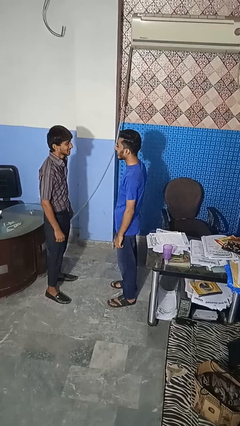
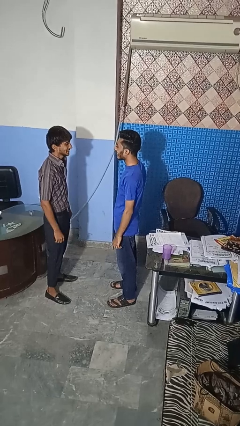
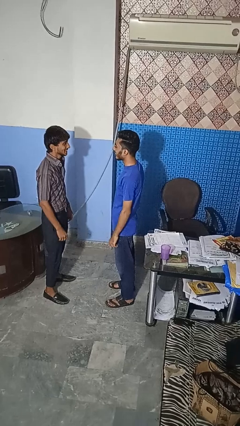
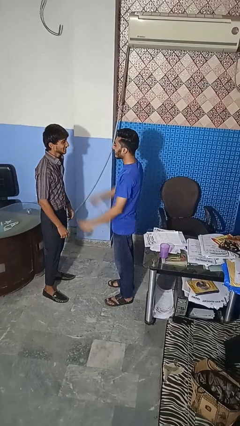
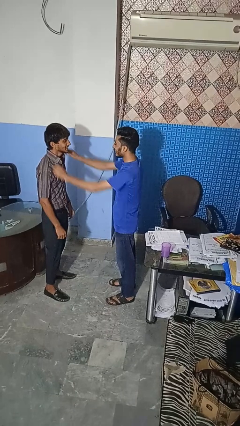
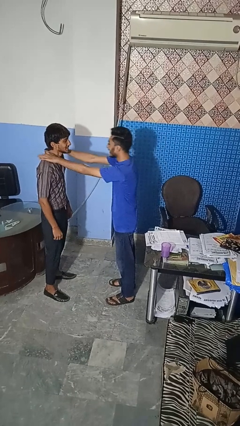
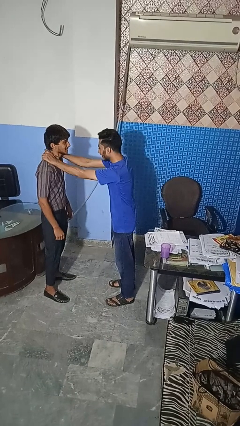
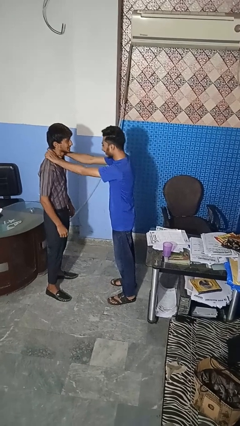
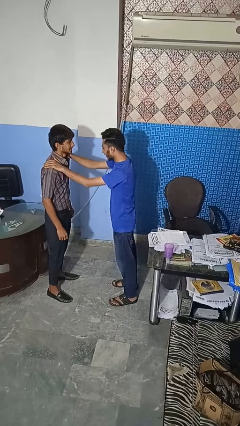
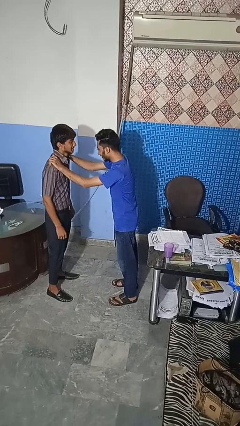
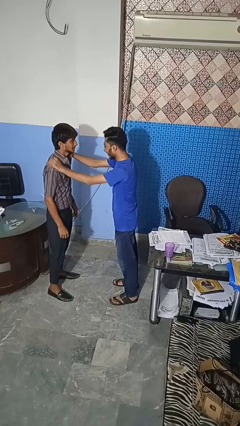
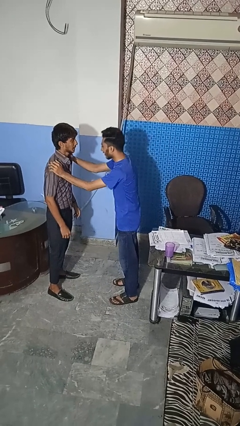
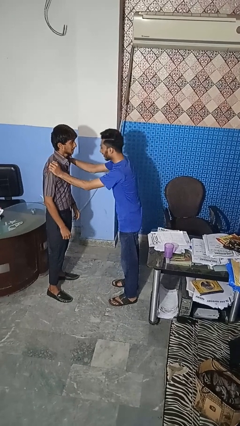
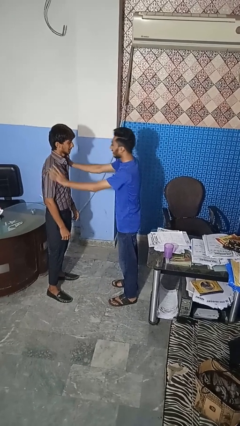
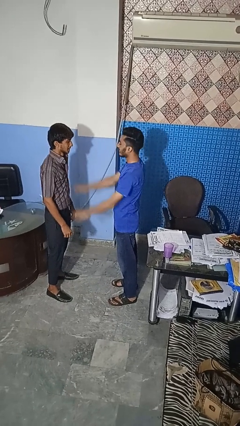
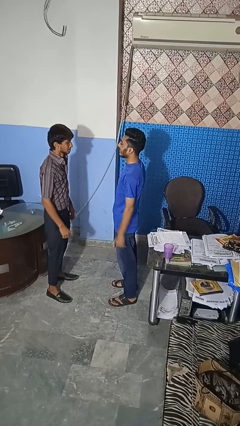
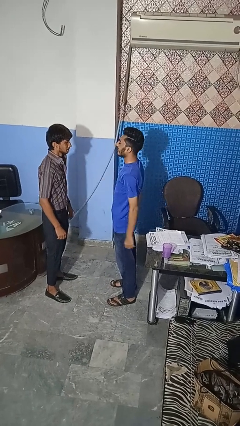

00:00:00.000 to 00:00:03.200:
person pounds shoulders of person

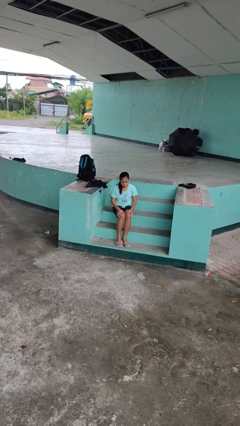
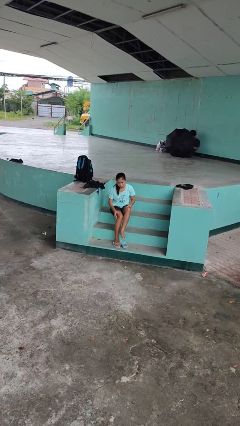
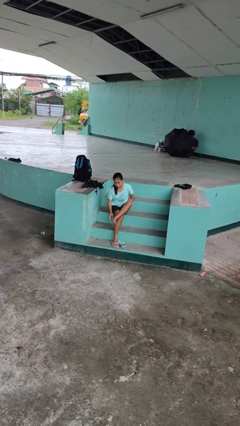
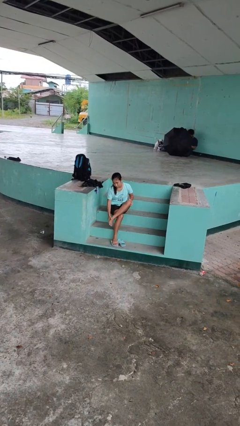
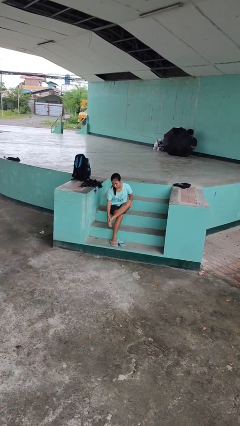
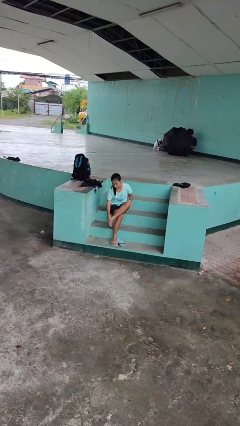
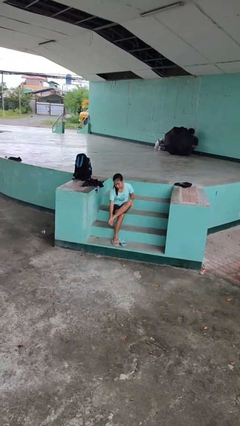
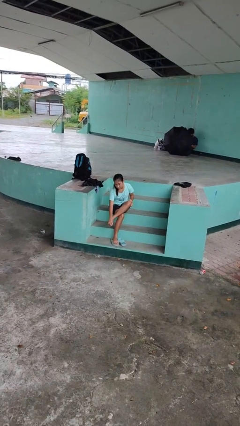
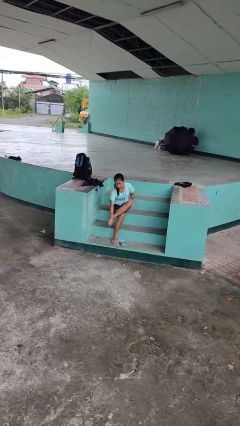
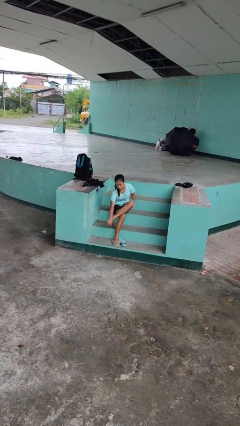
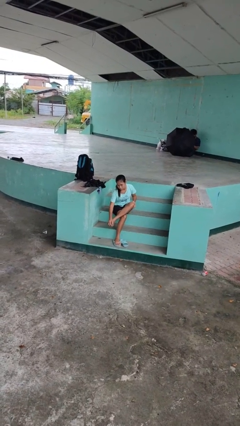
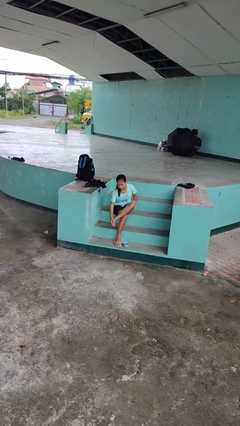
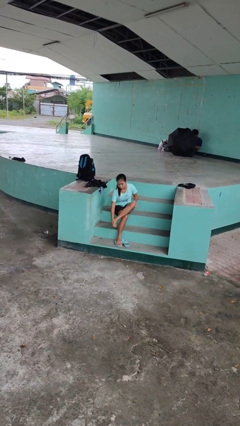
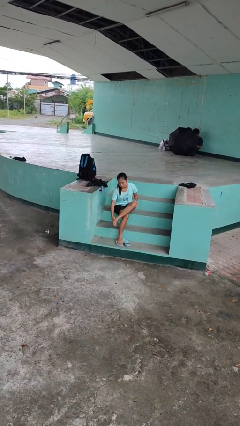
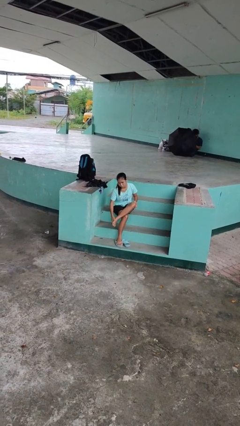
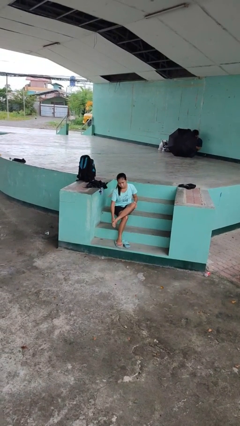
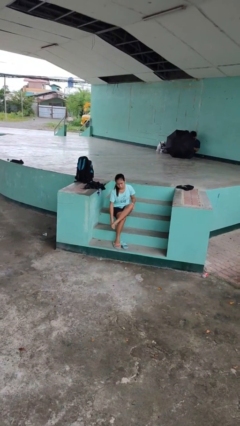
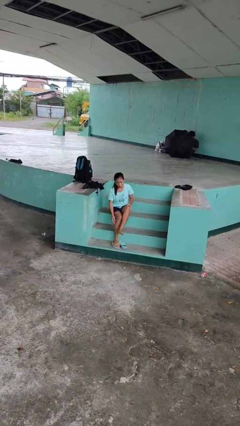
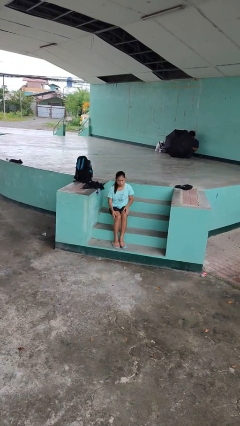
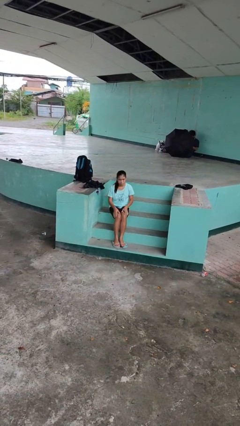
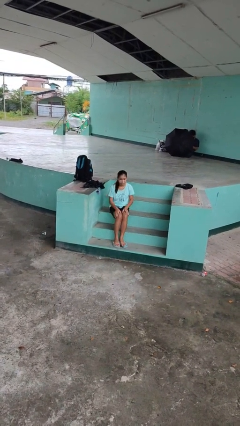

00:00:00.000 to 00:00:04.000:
person rubs foot

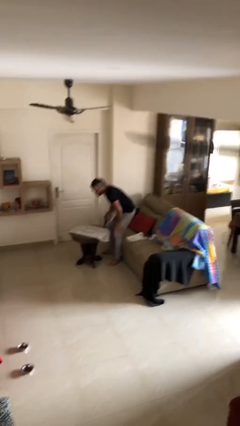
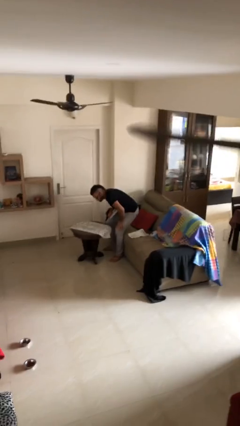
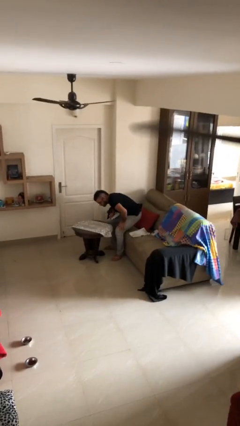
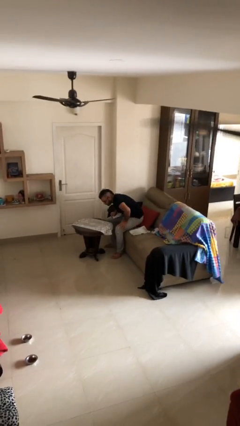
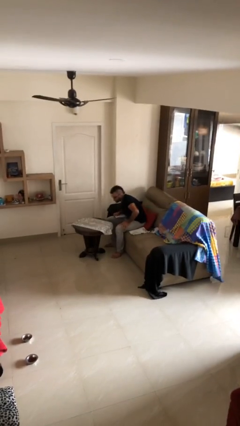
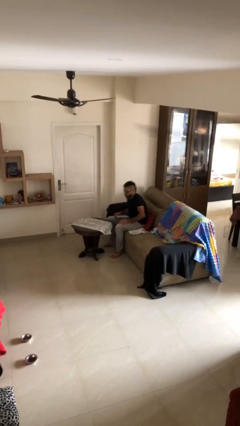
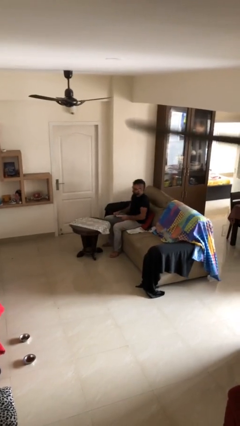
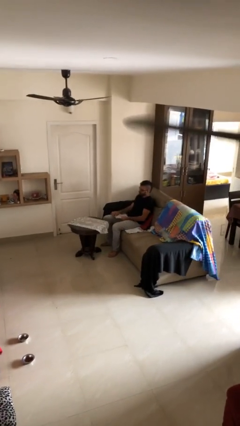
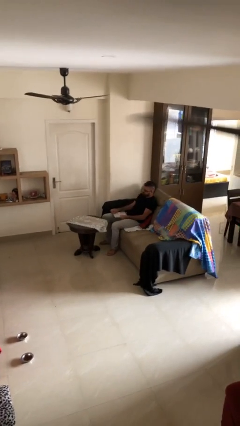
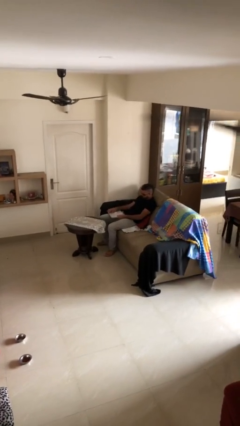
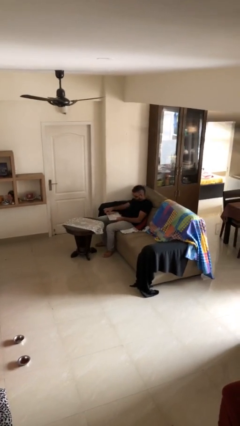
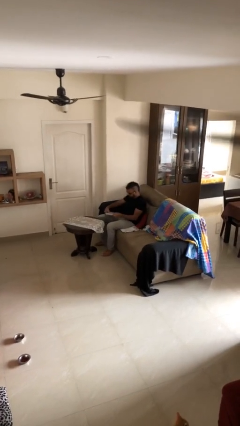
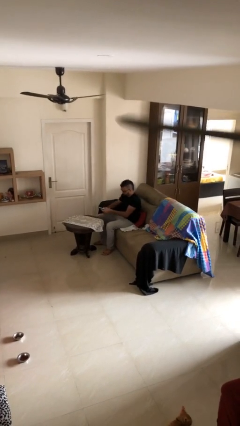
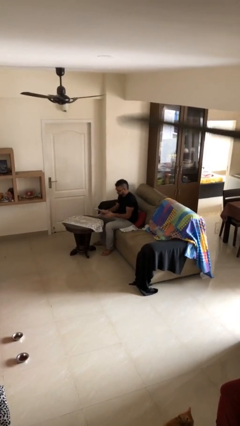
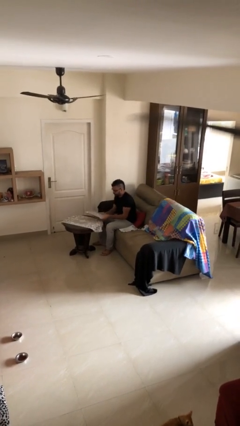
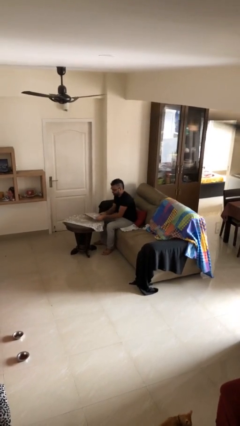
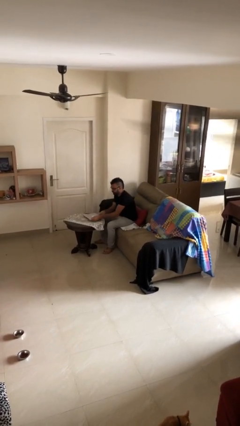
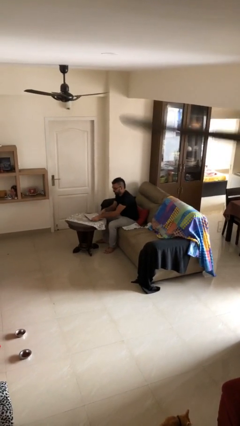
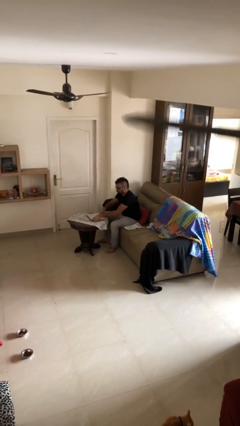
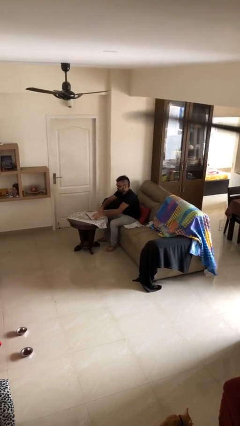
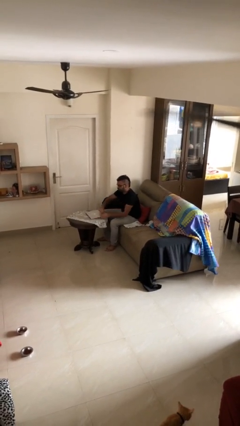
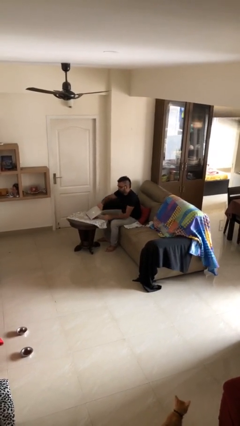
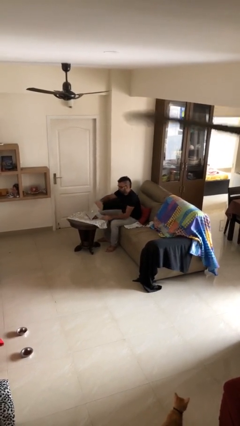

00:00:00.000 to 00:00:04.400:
person sits down

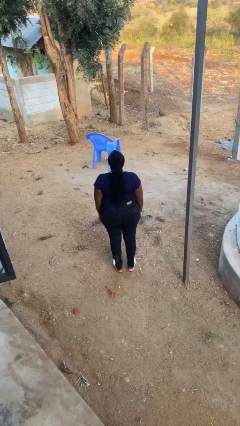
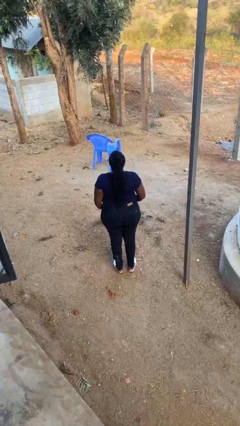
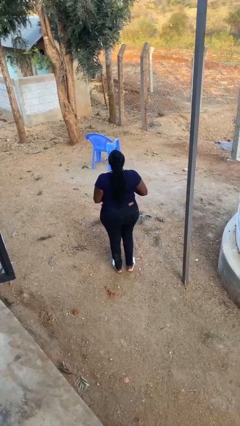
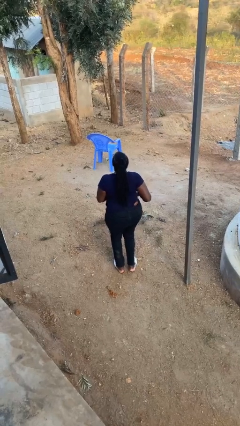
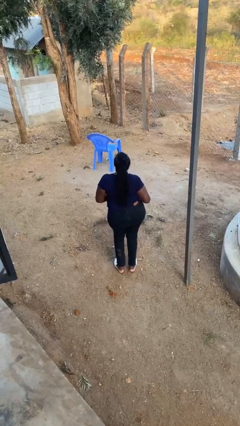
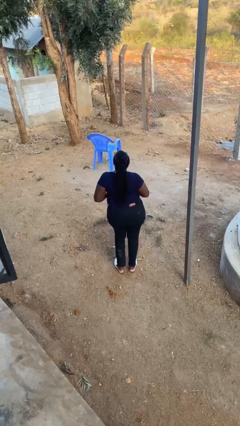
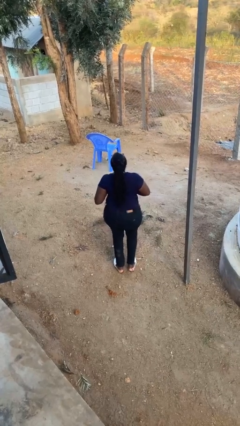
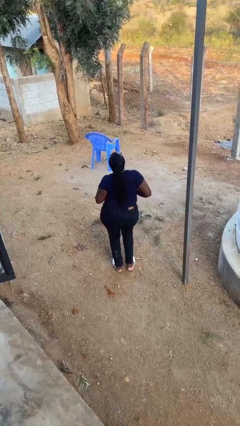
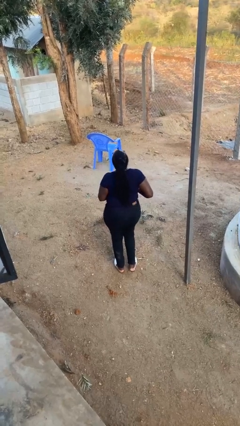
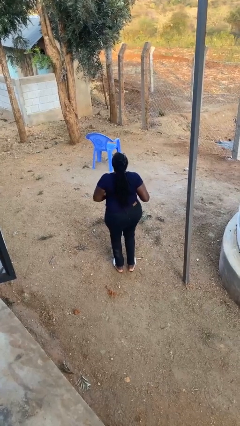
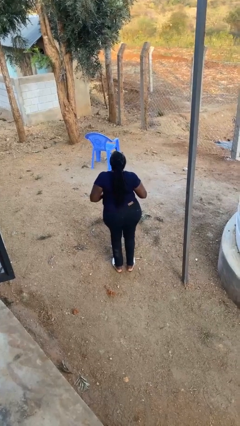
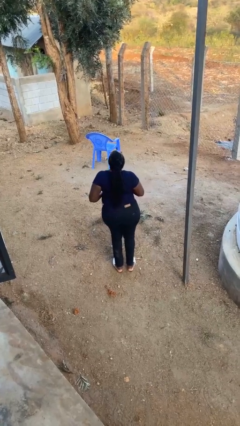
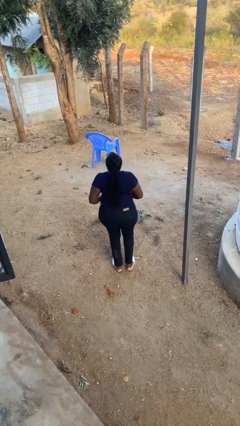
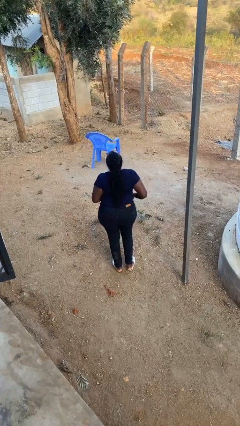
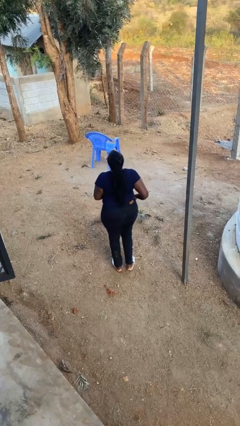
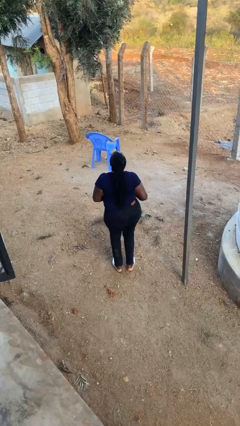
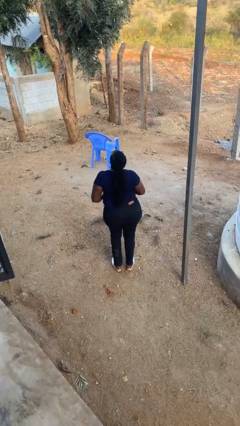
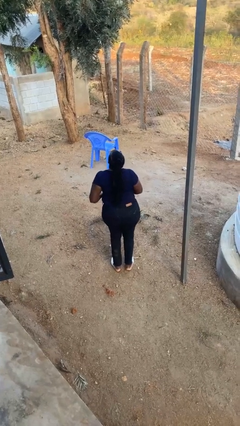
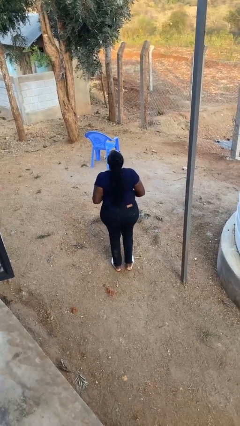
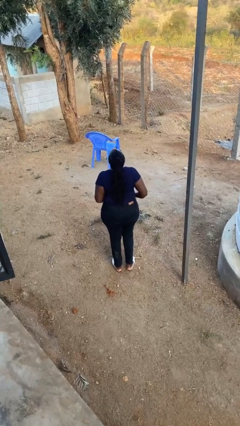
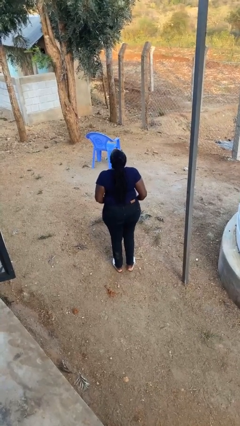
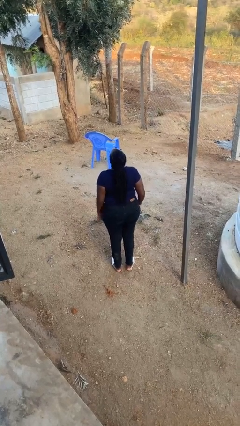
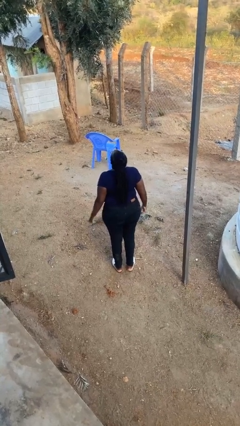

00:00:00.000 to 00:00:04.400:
person wiggles hips

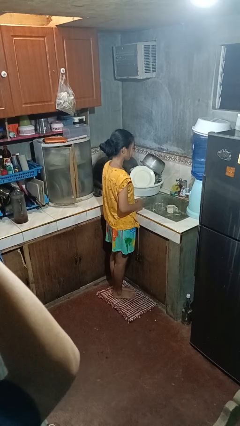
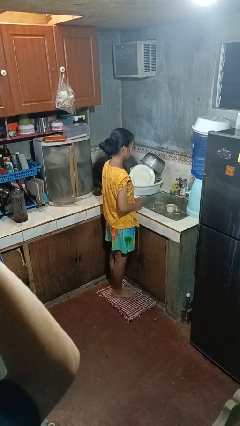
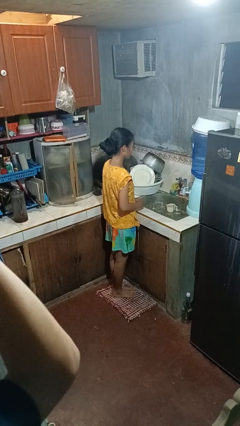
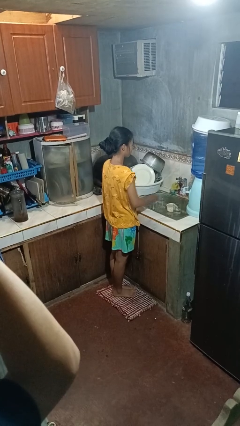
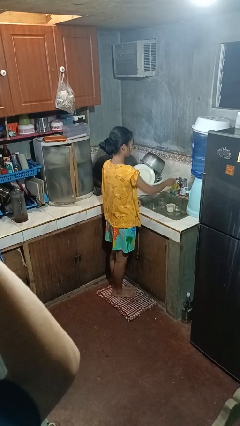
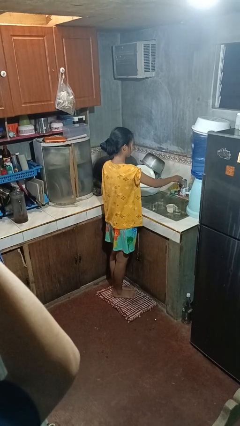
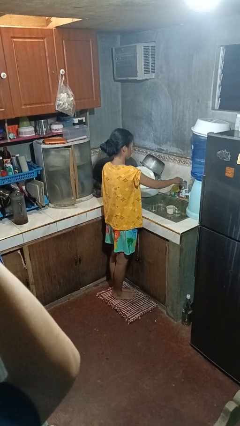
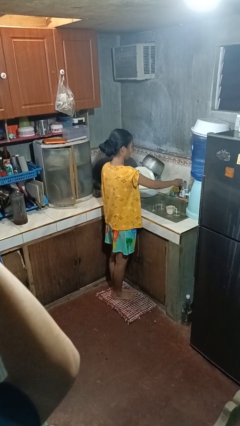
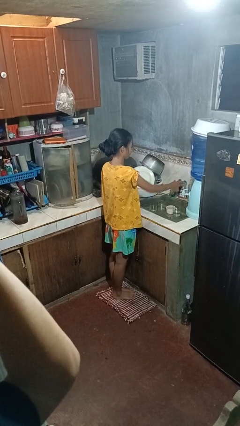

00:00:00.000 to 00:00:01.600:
person turns on faucet
